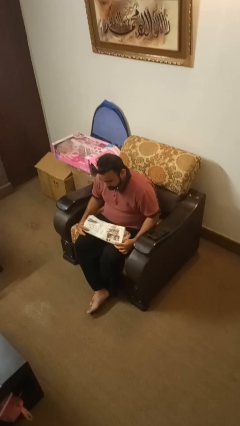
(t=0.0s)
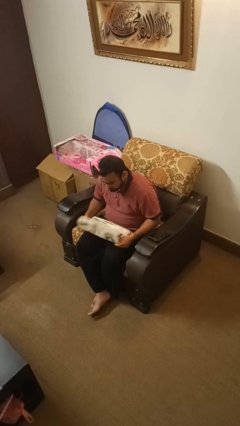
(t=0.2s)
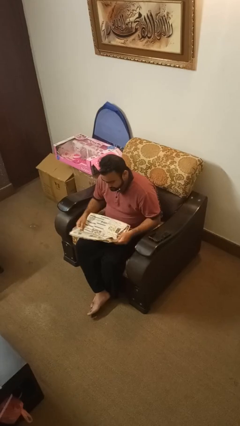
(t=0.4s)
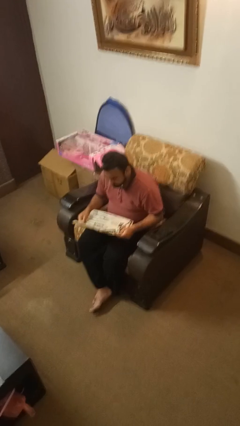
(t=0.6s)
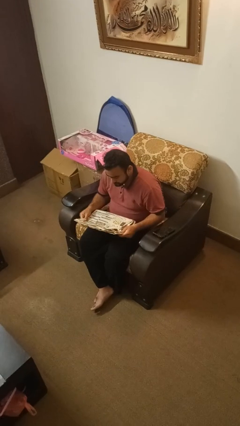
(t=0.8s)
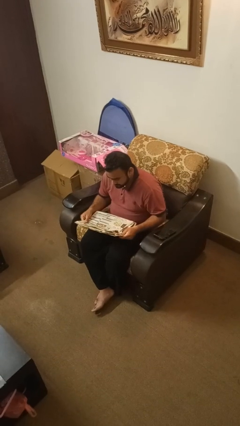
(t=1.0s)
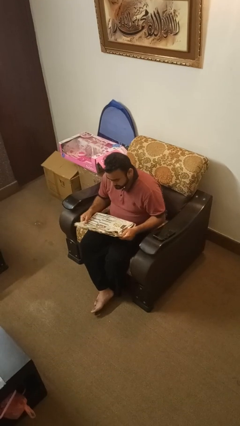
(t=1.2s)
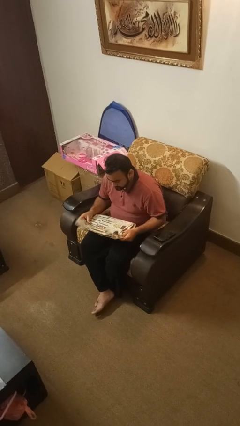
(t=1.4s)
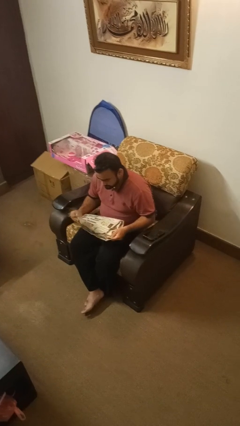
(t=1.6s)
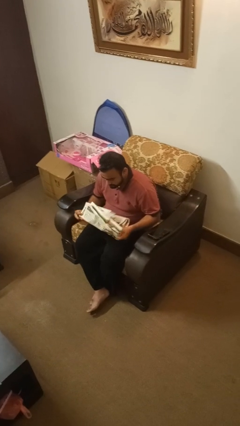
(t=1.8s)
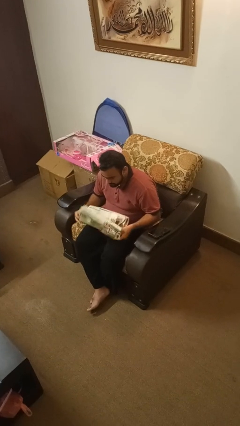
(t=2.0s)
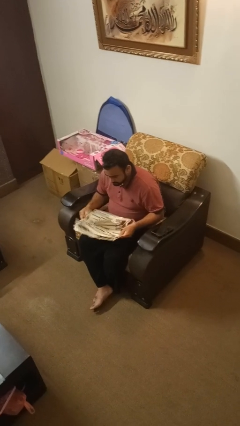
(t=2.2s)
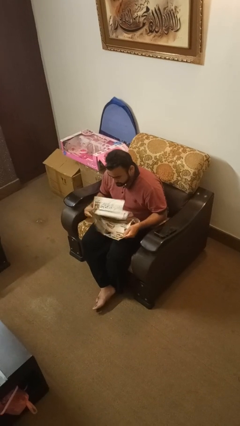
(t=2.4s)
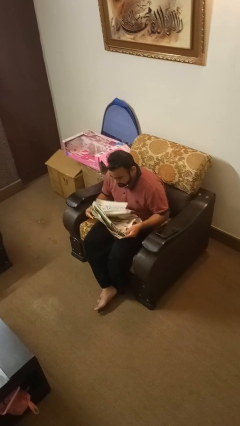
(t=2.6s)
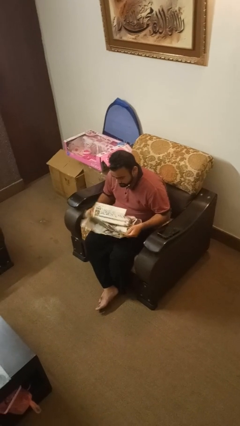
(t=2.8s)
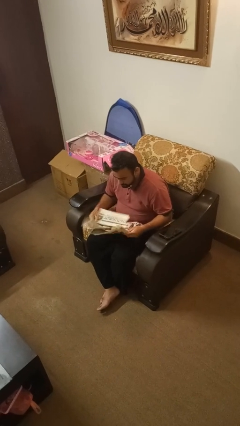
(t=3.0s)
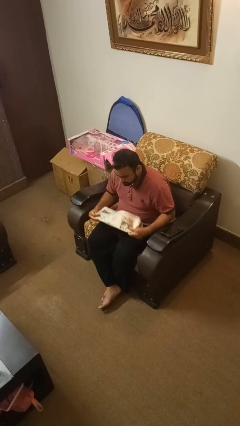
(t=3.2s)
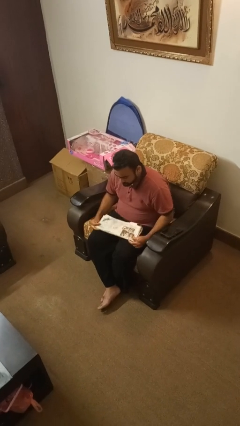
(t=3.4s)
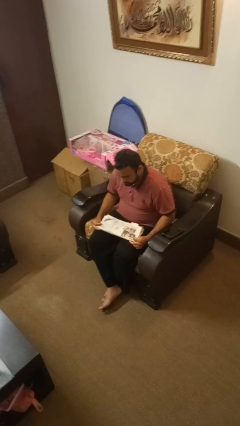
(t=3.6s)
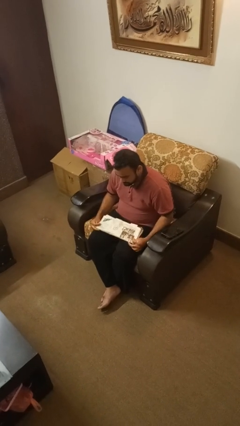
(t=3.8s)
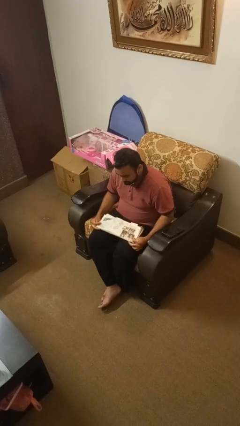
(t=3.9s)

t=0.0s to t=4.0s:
person reads newspaper

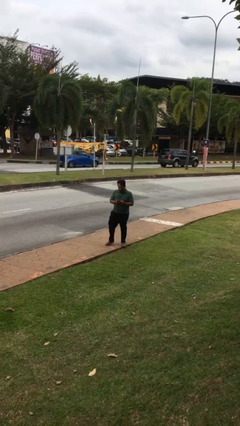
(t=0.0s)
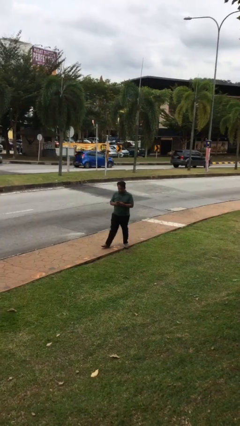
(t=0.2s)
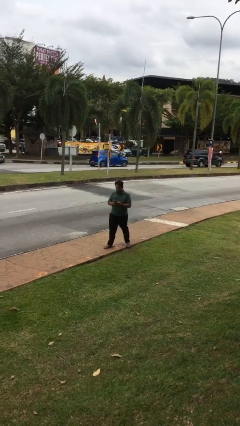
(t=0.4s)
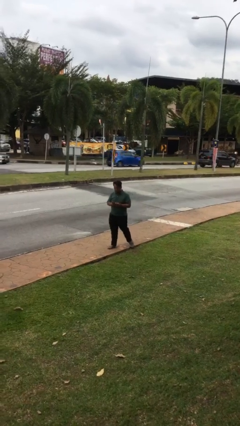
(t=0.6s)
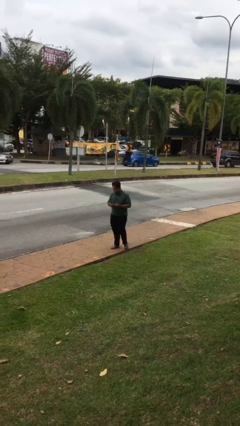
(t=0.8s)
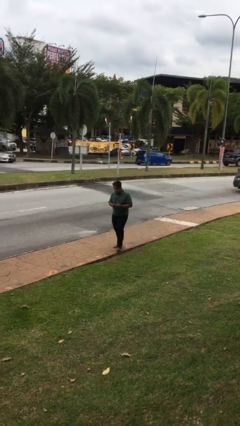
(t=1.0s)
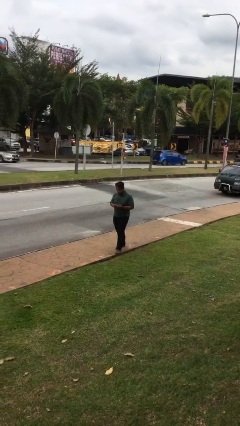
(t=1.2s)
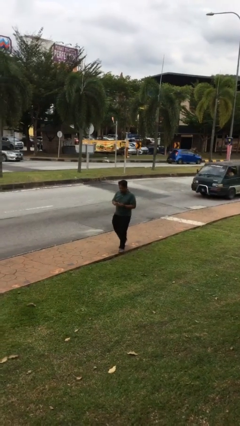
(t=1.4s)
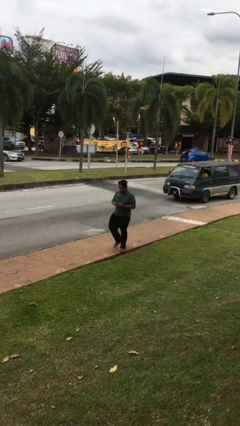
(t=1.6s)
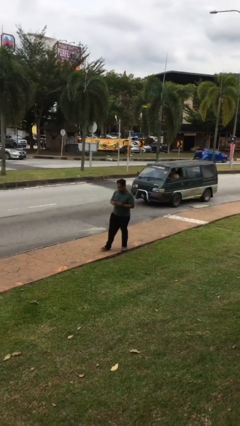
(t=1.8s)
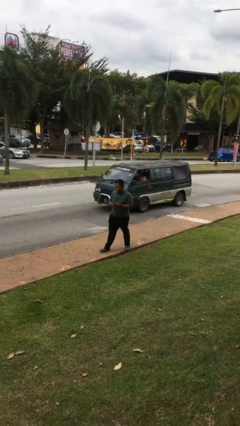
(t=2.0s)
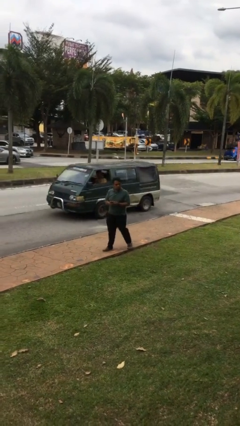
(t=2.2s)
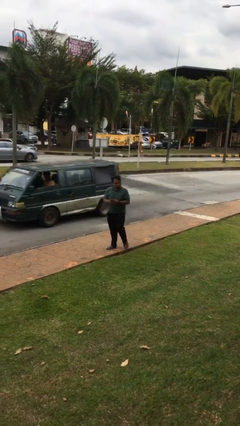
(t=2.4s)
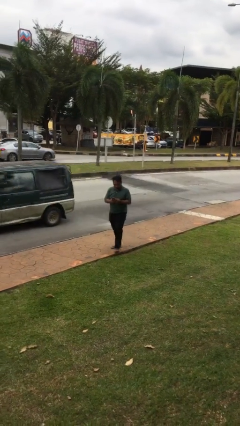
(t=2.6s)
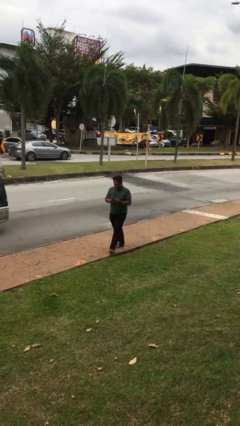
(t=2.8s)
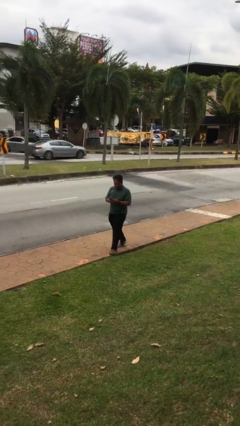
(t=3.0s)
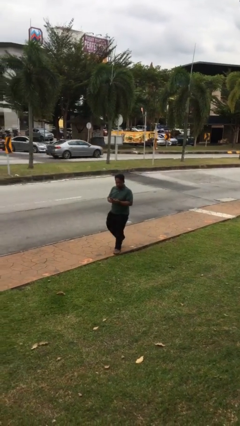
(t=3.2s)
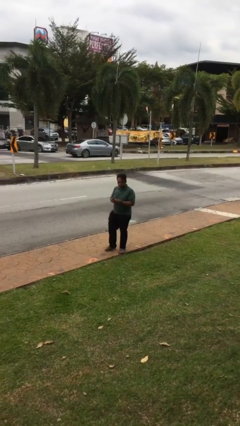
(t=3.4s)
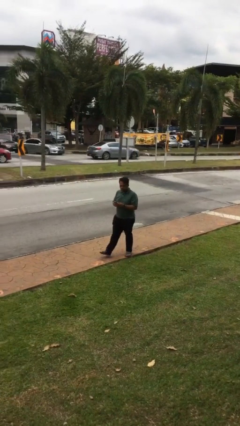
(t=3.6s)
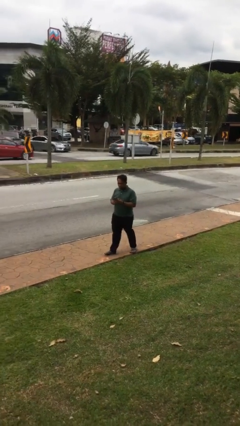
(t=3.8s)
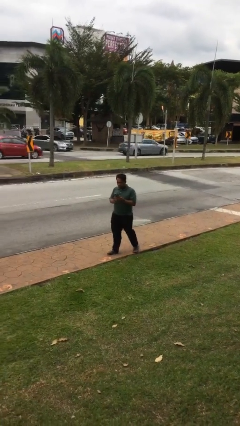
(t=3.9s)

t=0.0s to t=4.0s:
person texts on phone

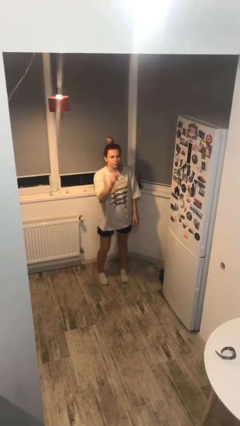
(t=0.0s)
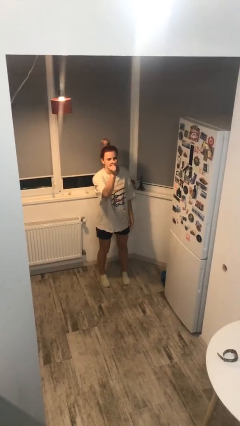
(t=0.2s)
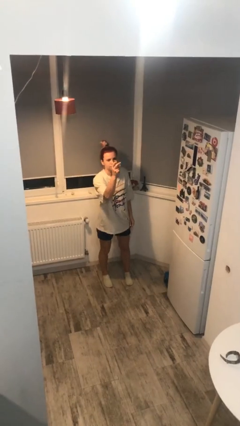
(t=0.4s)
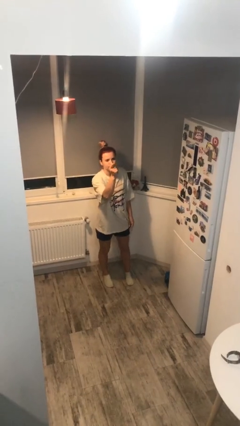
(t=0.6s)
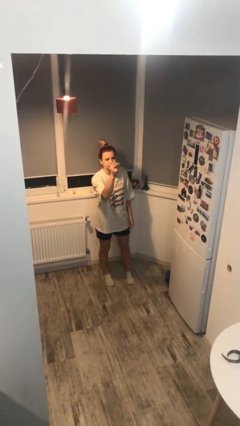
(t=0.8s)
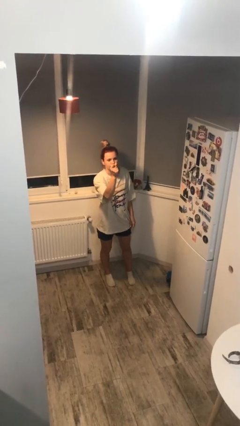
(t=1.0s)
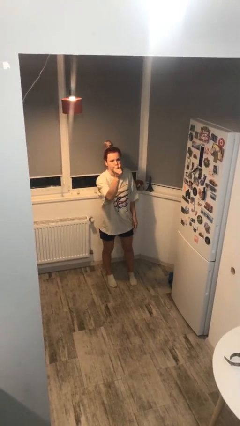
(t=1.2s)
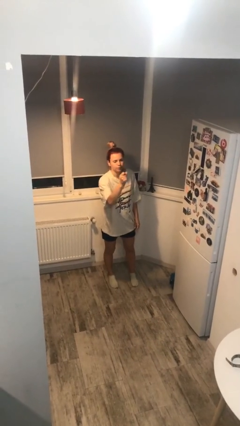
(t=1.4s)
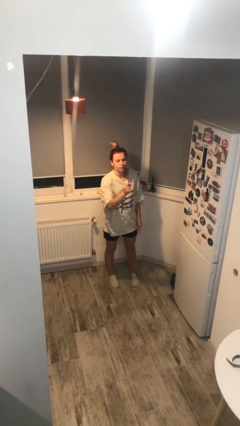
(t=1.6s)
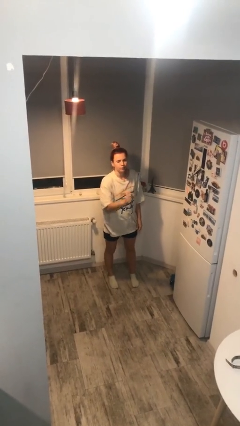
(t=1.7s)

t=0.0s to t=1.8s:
person snaps fingers

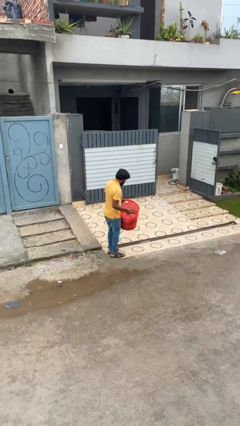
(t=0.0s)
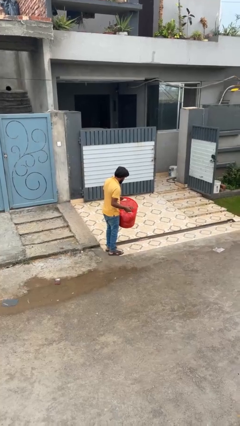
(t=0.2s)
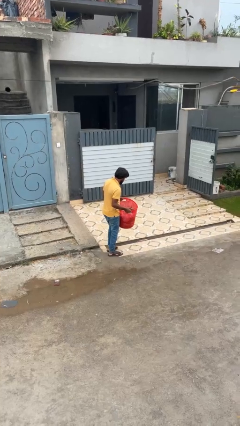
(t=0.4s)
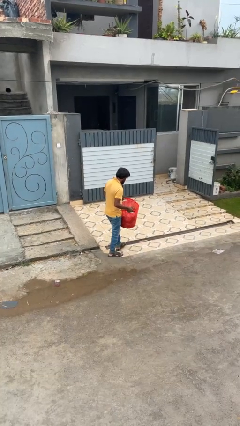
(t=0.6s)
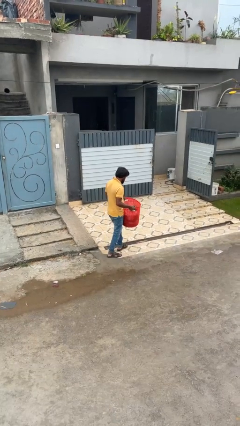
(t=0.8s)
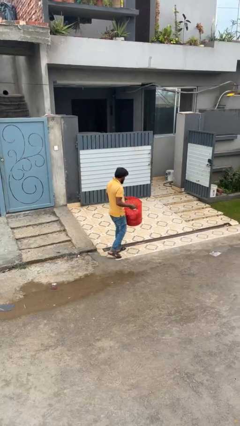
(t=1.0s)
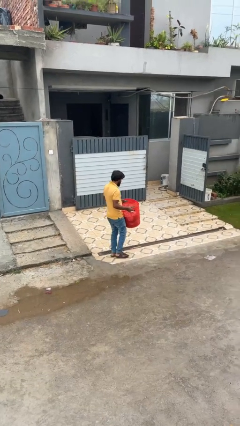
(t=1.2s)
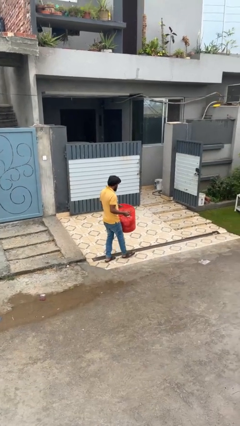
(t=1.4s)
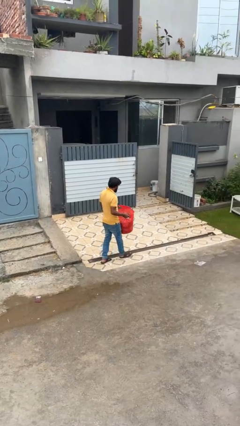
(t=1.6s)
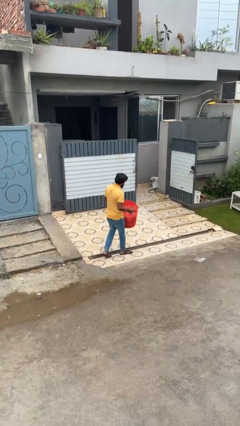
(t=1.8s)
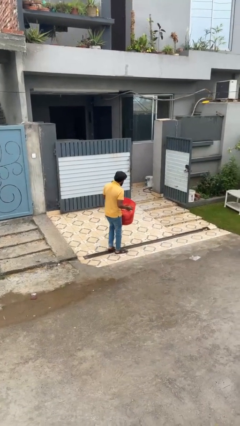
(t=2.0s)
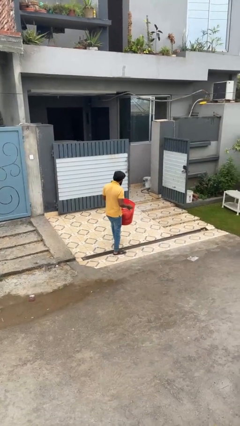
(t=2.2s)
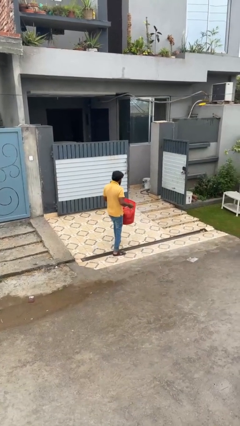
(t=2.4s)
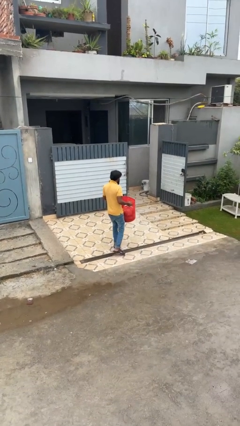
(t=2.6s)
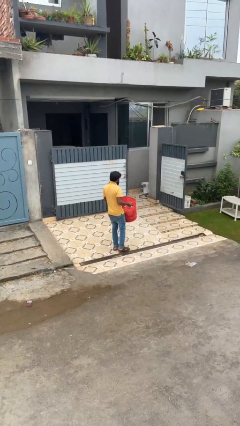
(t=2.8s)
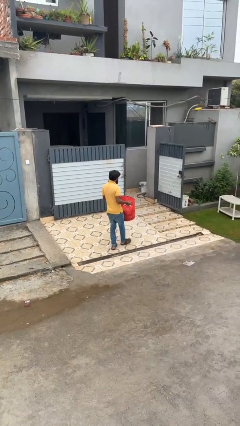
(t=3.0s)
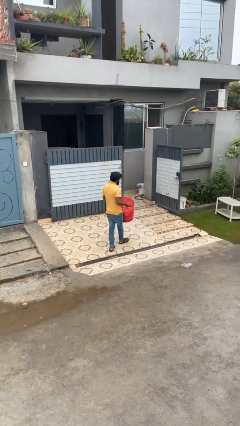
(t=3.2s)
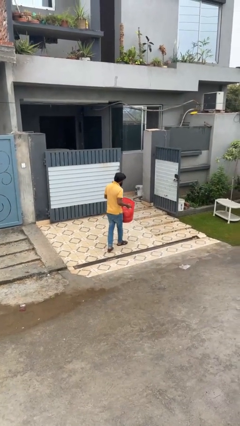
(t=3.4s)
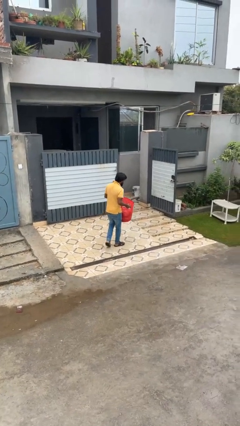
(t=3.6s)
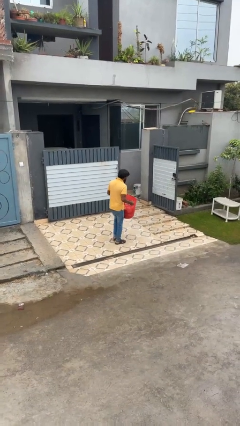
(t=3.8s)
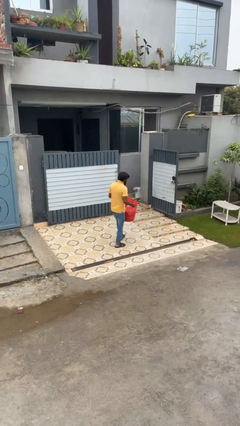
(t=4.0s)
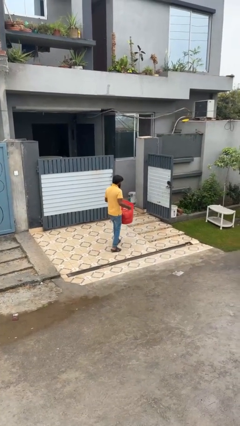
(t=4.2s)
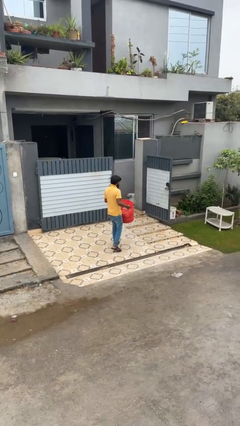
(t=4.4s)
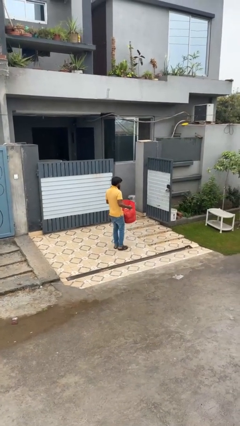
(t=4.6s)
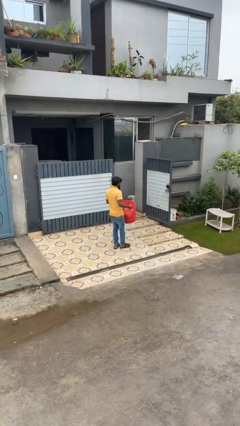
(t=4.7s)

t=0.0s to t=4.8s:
person carries laundry basket

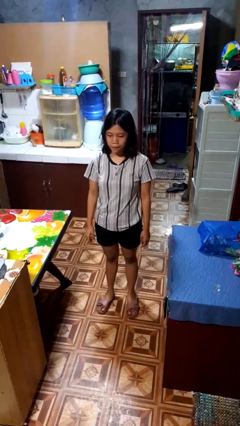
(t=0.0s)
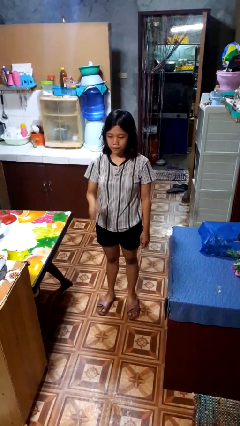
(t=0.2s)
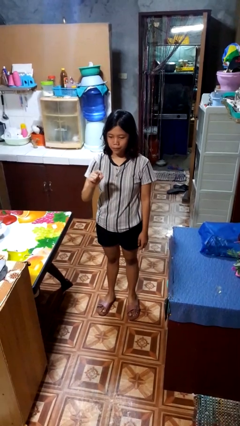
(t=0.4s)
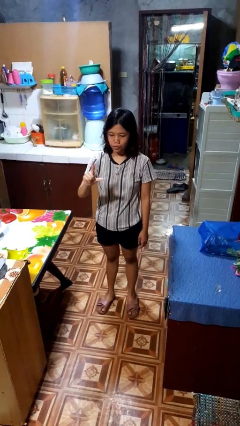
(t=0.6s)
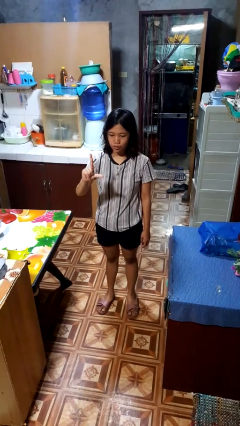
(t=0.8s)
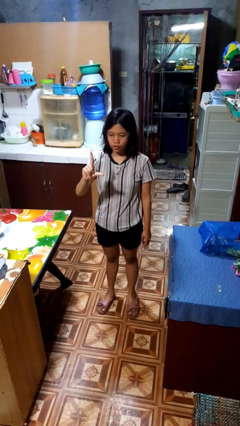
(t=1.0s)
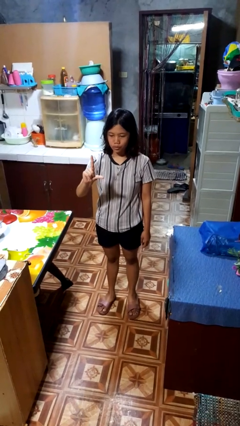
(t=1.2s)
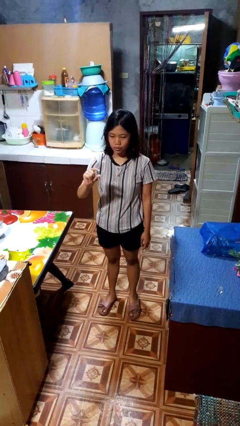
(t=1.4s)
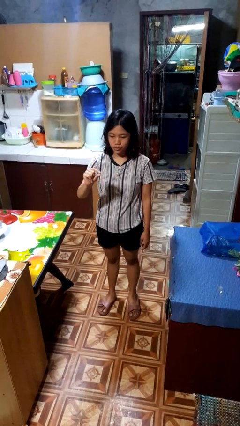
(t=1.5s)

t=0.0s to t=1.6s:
person gestures zoom in

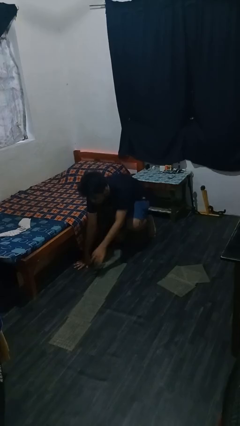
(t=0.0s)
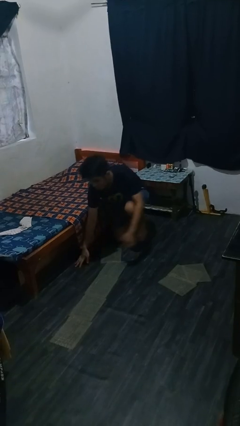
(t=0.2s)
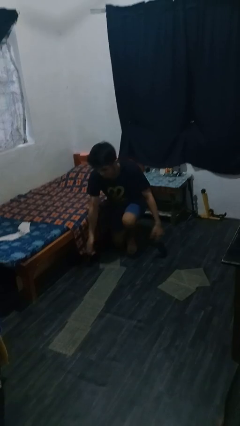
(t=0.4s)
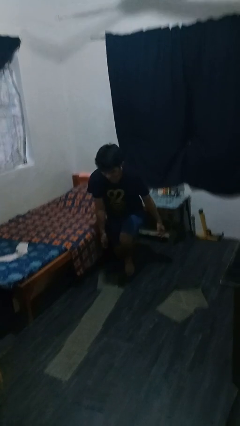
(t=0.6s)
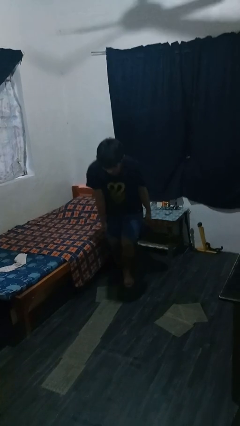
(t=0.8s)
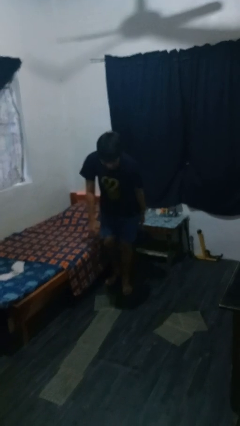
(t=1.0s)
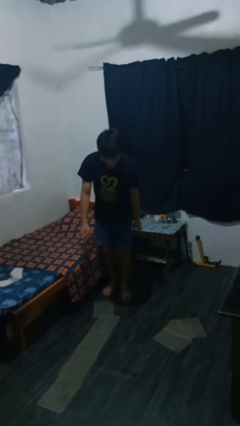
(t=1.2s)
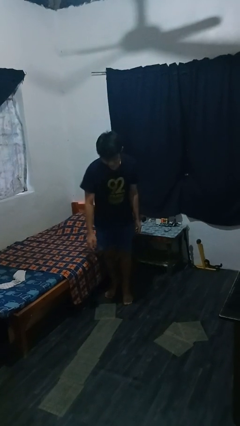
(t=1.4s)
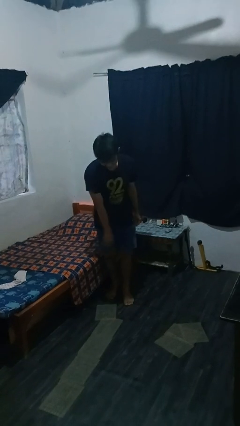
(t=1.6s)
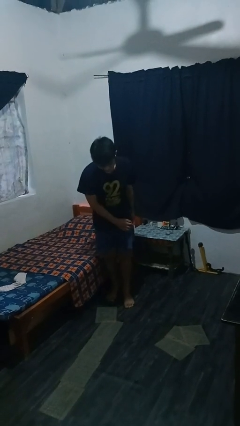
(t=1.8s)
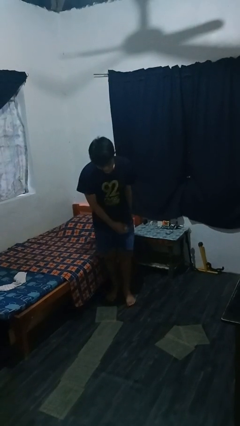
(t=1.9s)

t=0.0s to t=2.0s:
person stands up from floor
